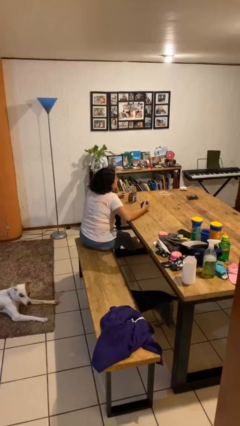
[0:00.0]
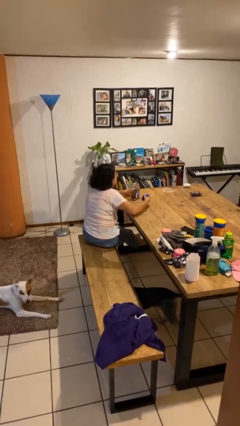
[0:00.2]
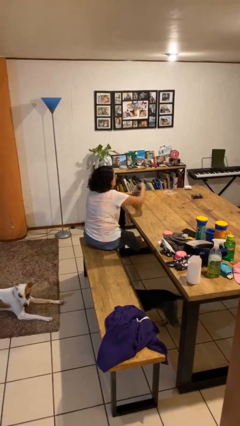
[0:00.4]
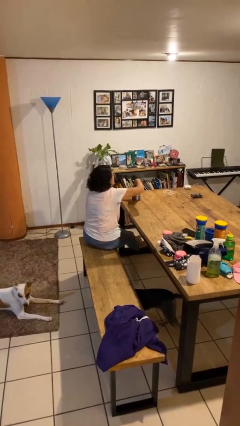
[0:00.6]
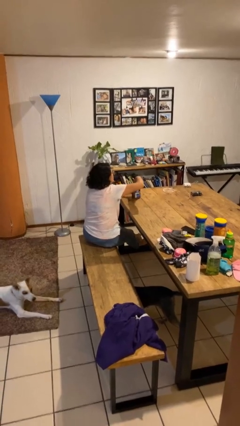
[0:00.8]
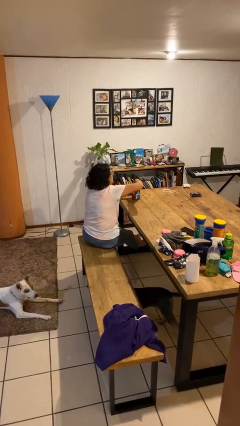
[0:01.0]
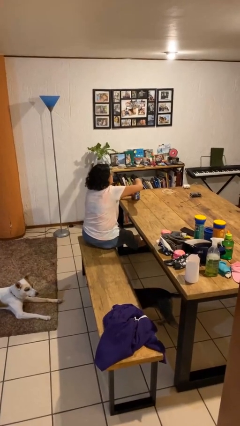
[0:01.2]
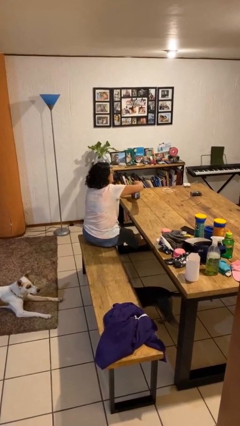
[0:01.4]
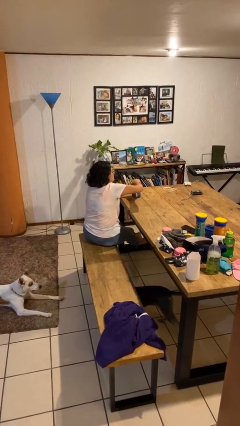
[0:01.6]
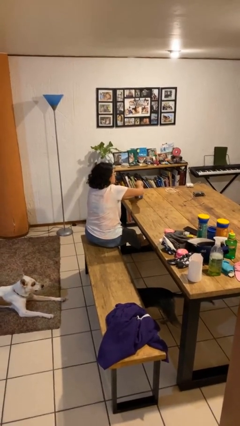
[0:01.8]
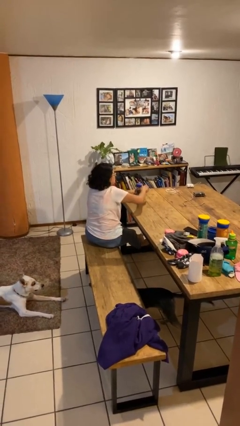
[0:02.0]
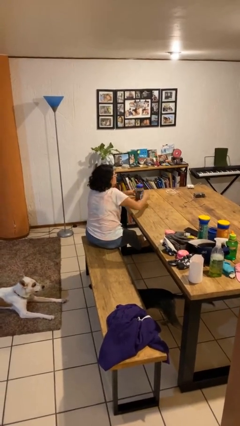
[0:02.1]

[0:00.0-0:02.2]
person closes jar

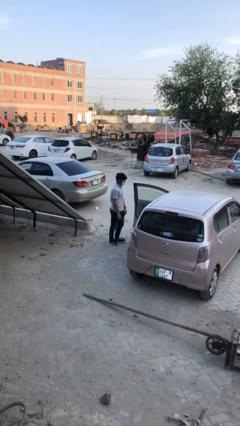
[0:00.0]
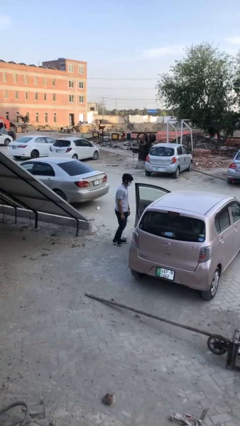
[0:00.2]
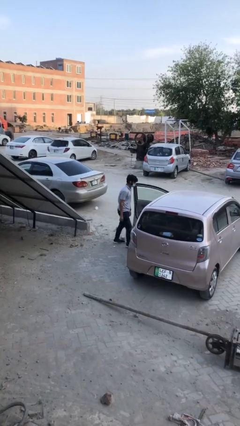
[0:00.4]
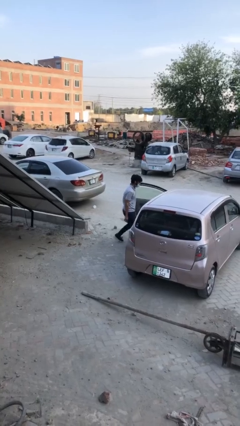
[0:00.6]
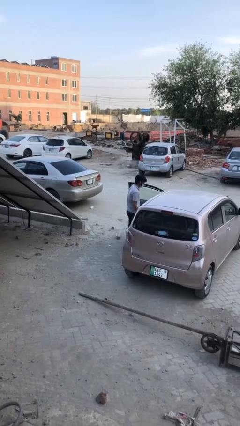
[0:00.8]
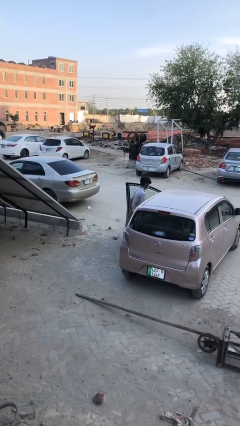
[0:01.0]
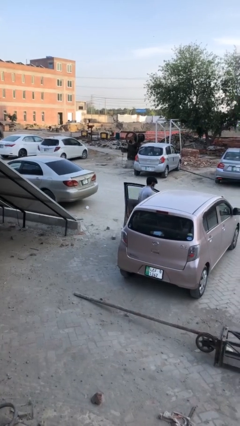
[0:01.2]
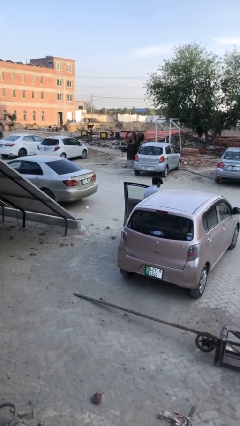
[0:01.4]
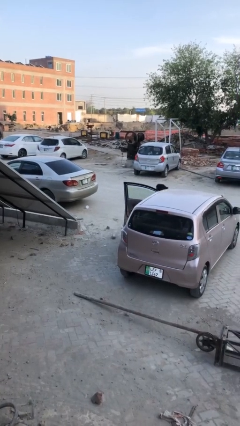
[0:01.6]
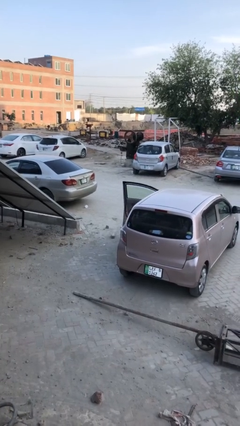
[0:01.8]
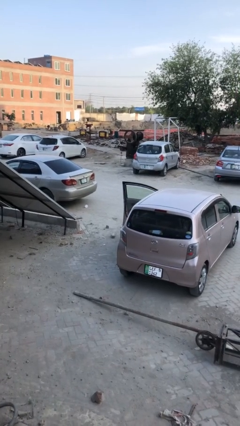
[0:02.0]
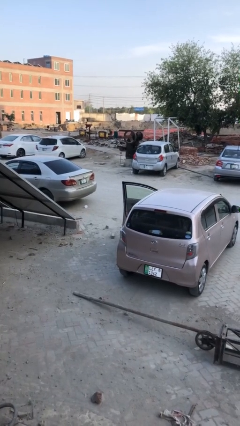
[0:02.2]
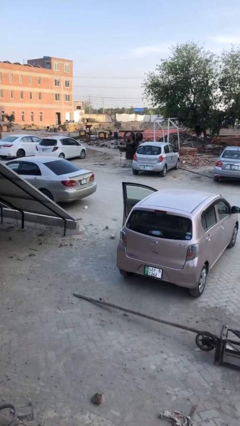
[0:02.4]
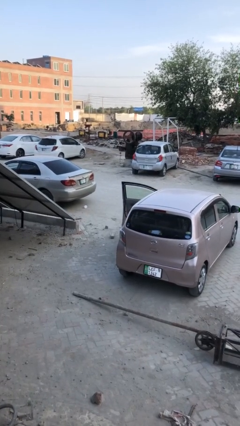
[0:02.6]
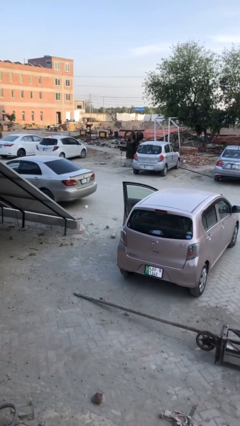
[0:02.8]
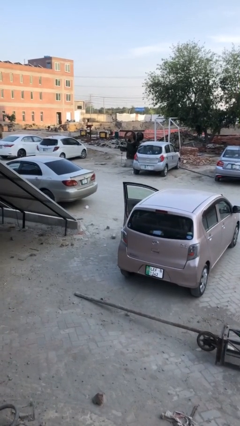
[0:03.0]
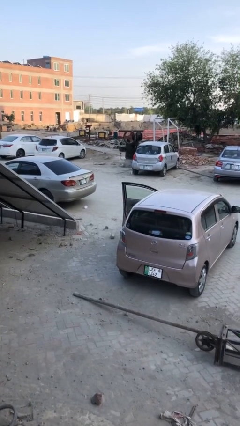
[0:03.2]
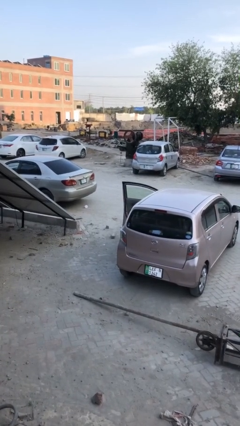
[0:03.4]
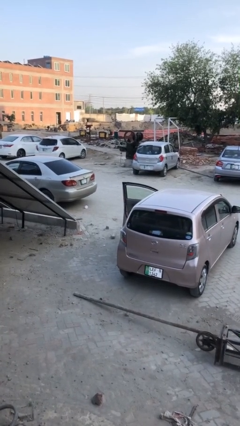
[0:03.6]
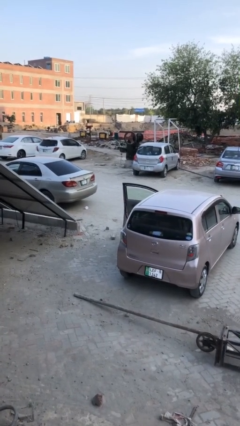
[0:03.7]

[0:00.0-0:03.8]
person enters car

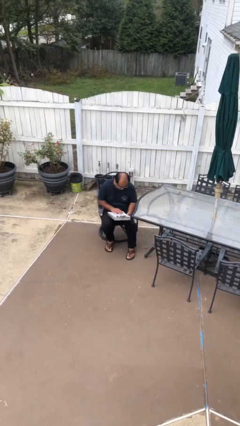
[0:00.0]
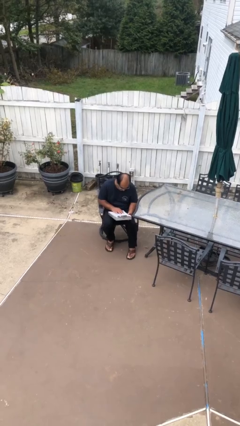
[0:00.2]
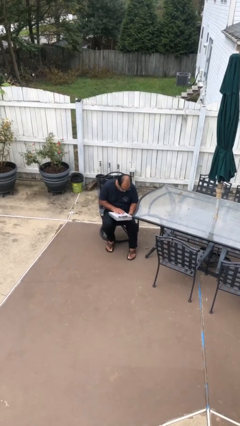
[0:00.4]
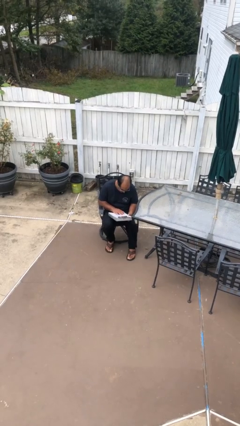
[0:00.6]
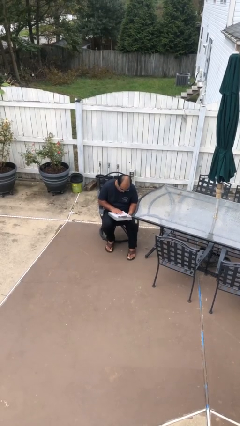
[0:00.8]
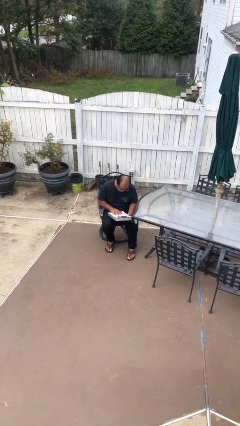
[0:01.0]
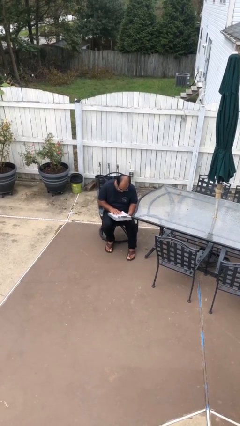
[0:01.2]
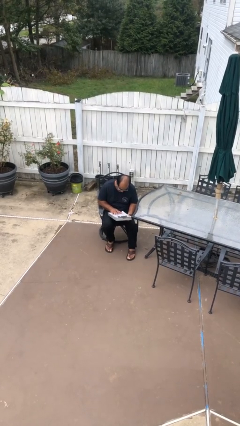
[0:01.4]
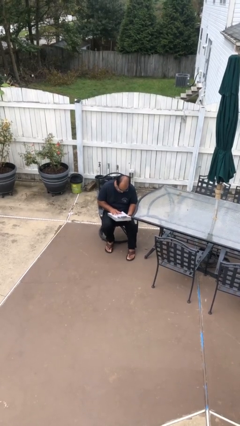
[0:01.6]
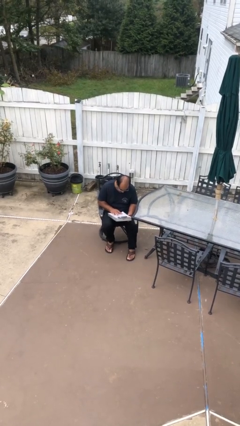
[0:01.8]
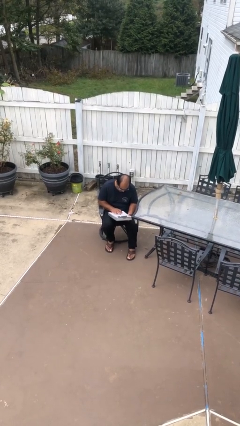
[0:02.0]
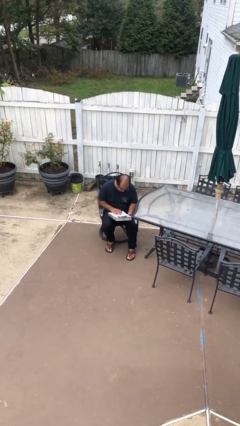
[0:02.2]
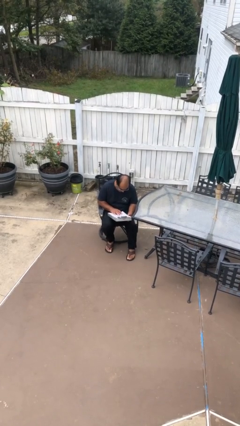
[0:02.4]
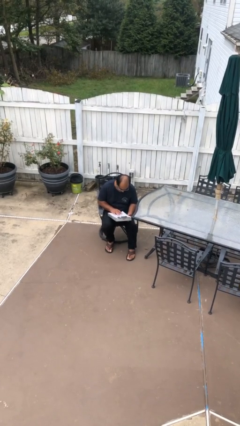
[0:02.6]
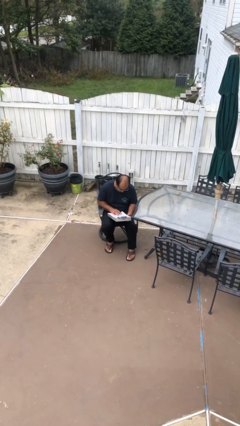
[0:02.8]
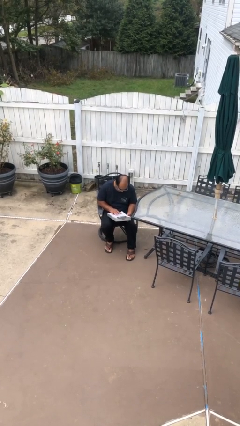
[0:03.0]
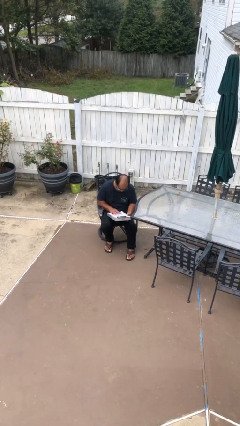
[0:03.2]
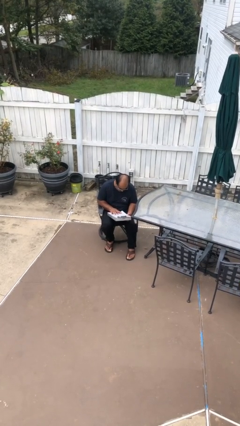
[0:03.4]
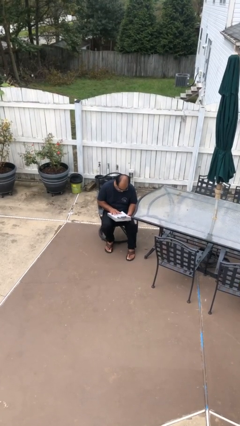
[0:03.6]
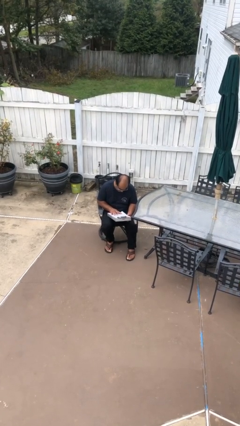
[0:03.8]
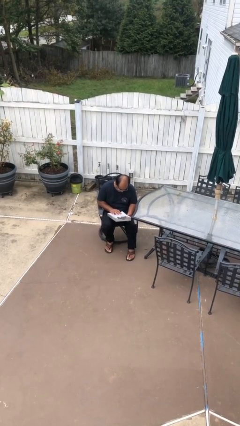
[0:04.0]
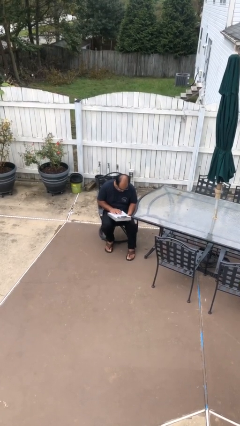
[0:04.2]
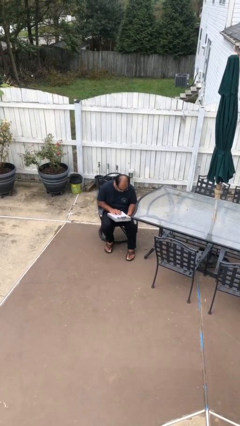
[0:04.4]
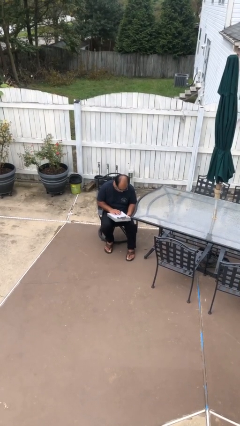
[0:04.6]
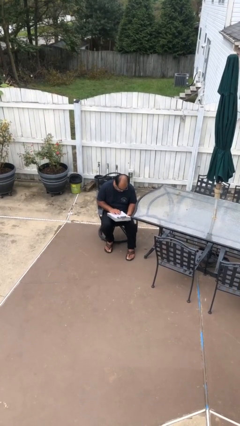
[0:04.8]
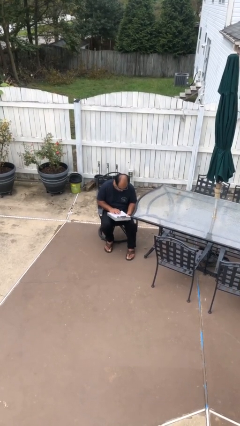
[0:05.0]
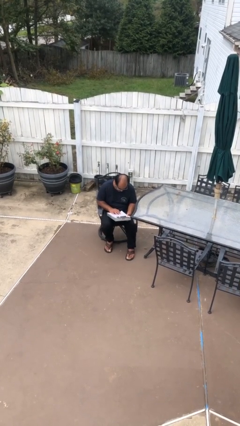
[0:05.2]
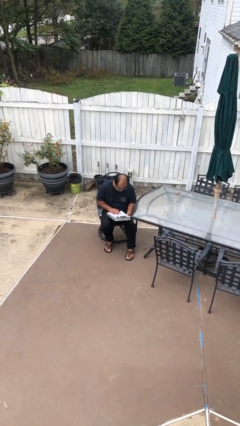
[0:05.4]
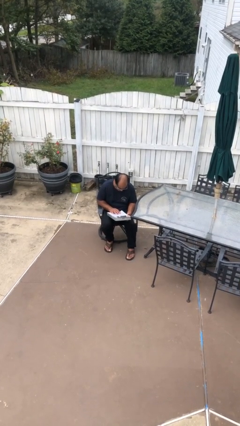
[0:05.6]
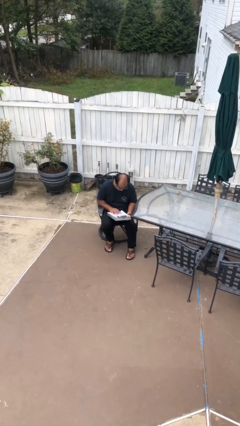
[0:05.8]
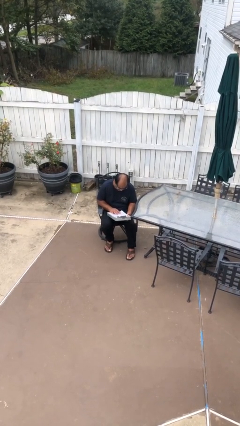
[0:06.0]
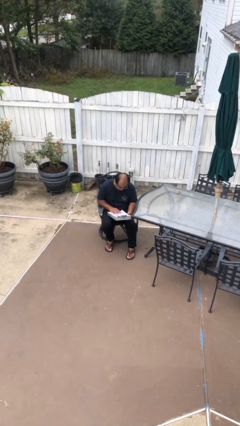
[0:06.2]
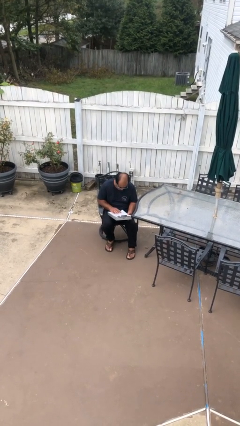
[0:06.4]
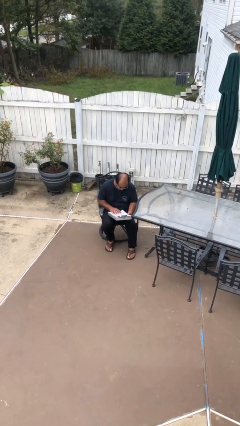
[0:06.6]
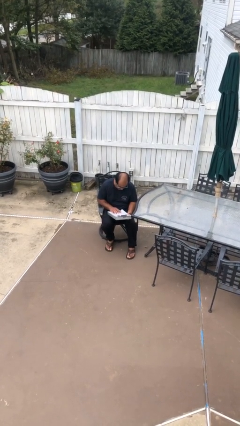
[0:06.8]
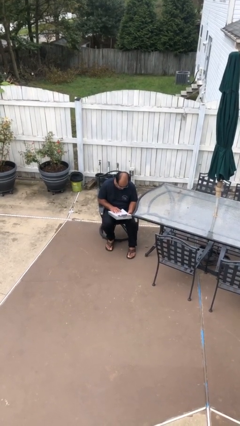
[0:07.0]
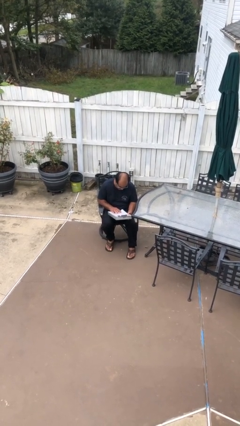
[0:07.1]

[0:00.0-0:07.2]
person reads document

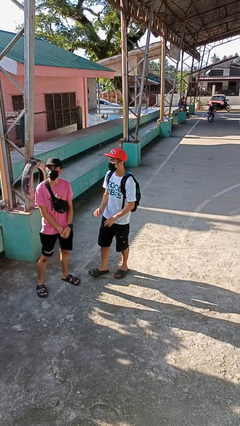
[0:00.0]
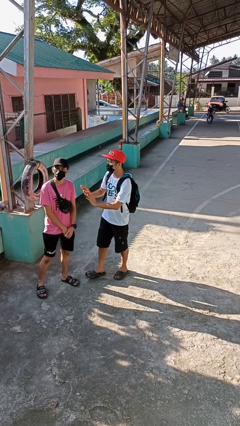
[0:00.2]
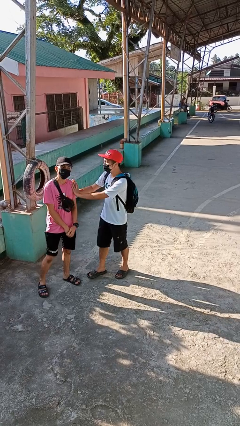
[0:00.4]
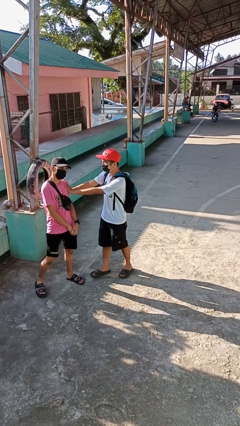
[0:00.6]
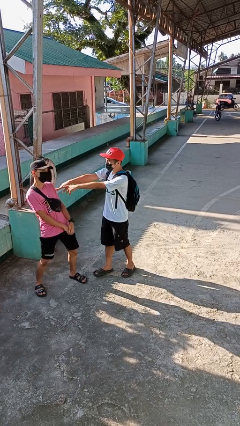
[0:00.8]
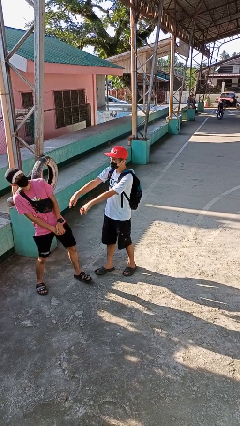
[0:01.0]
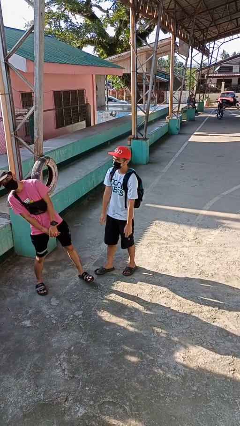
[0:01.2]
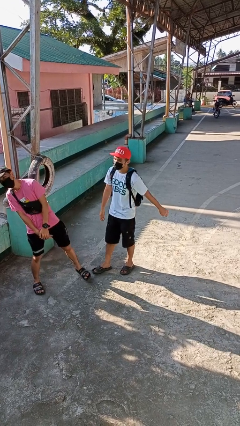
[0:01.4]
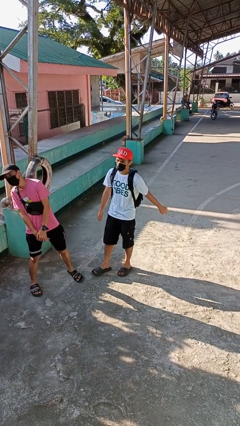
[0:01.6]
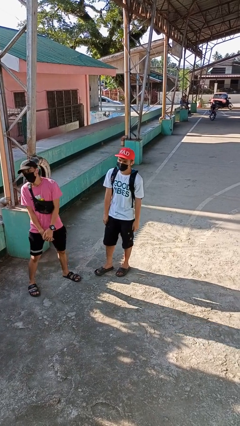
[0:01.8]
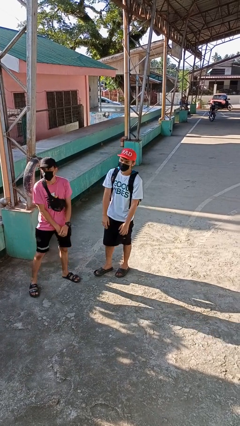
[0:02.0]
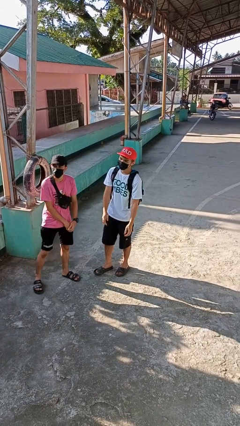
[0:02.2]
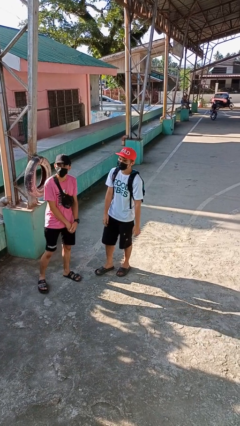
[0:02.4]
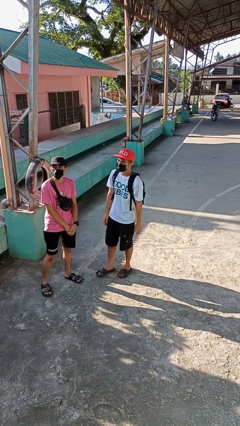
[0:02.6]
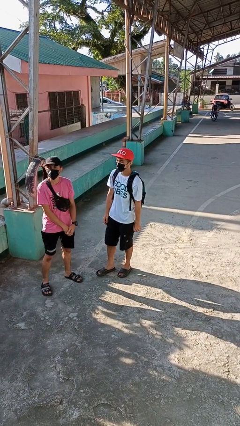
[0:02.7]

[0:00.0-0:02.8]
person shoves person

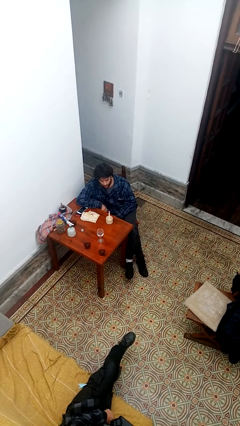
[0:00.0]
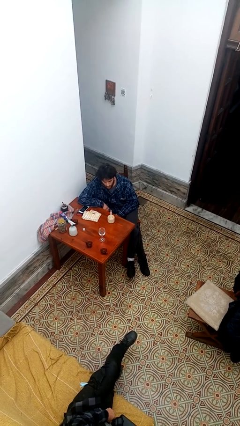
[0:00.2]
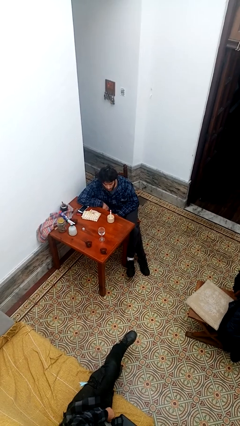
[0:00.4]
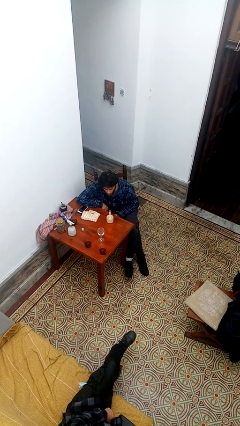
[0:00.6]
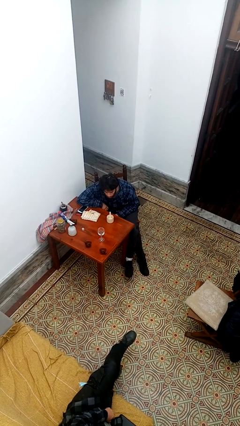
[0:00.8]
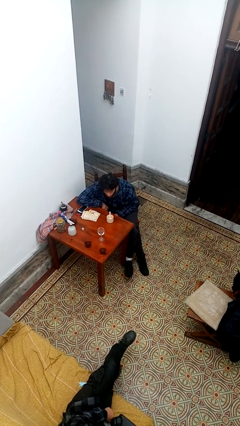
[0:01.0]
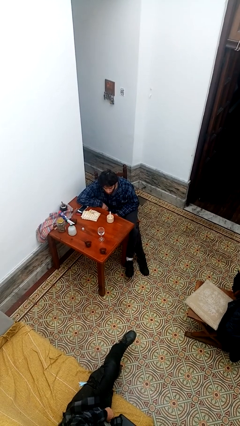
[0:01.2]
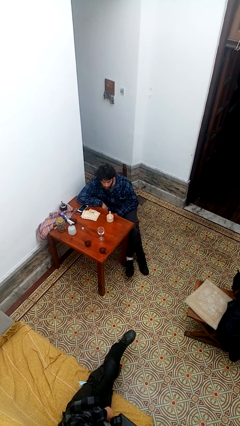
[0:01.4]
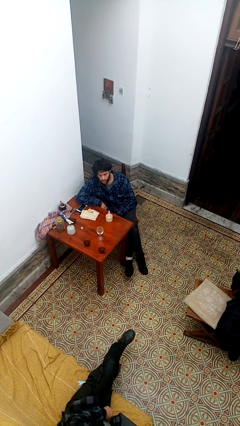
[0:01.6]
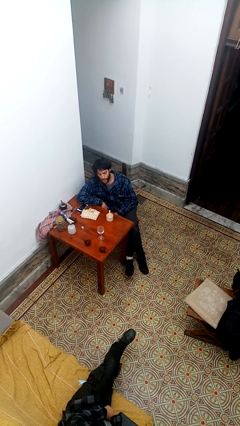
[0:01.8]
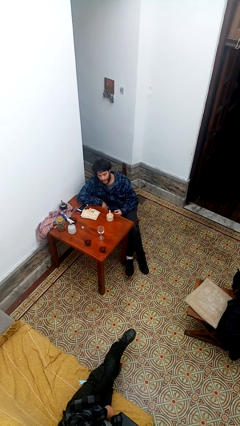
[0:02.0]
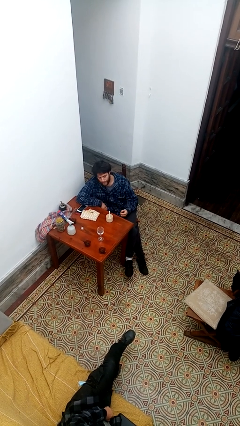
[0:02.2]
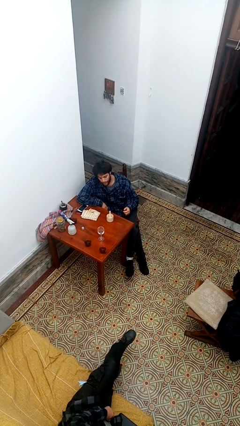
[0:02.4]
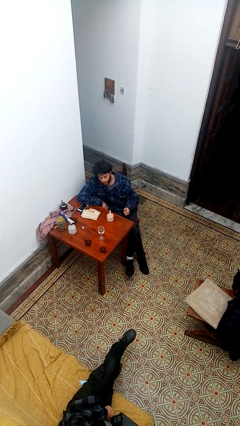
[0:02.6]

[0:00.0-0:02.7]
person extinguishes candle
